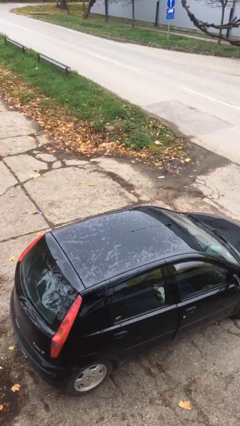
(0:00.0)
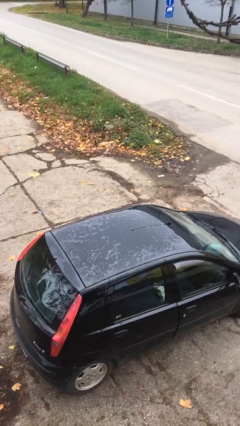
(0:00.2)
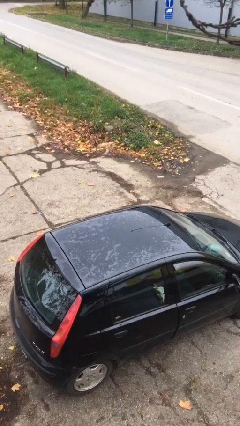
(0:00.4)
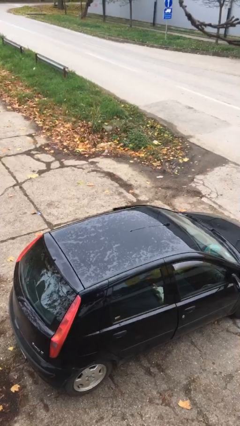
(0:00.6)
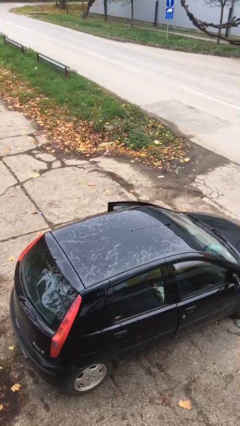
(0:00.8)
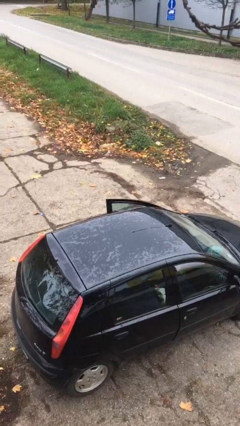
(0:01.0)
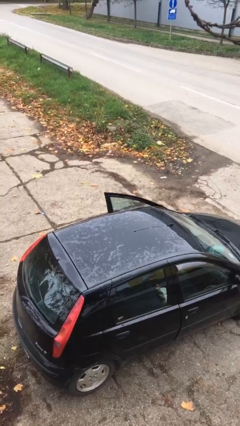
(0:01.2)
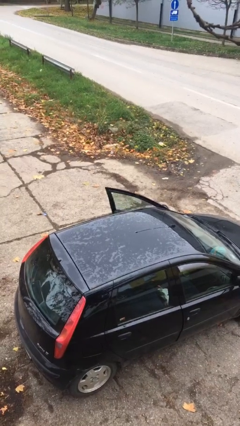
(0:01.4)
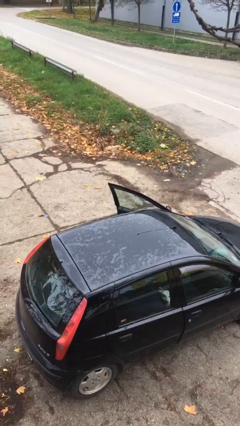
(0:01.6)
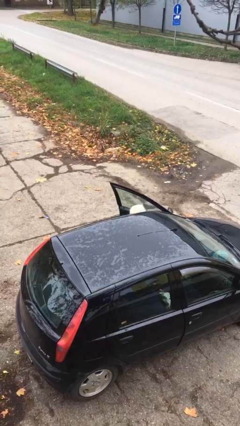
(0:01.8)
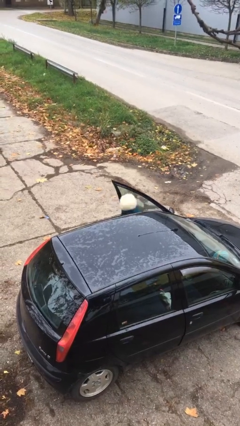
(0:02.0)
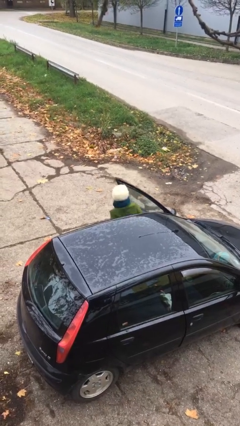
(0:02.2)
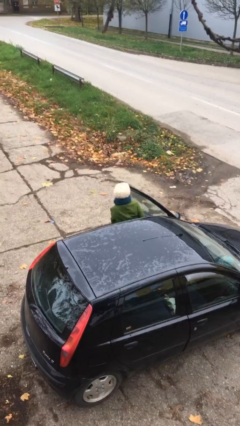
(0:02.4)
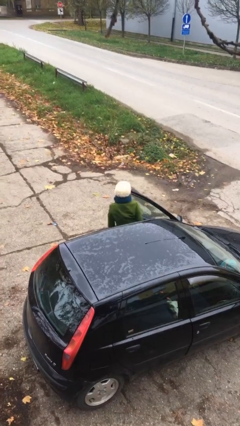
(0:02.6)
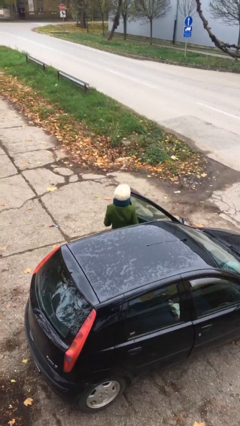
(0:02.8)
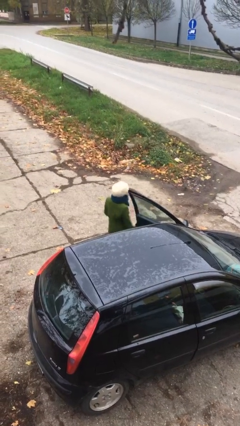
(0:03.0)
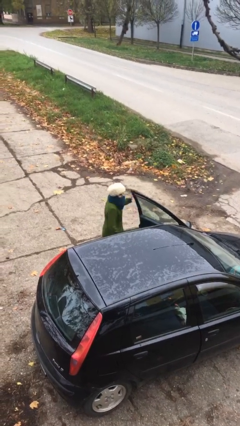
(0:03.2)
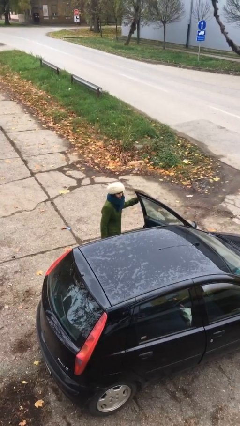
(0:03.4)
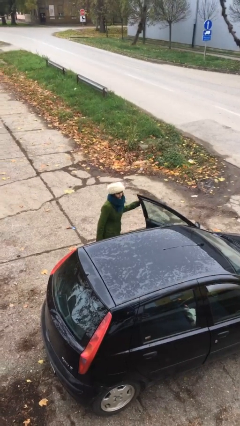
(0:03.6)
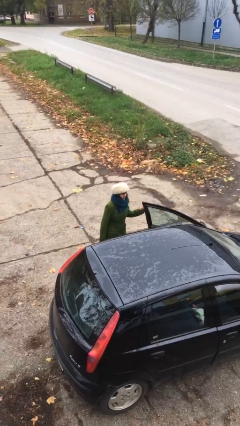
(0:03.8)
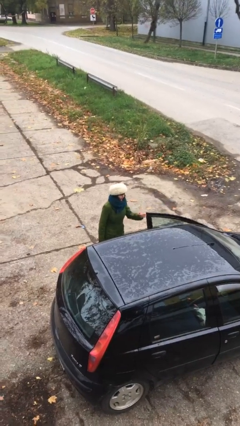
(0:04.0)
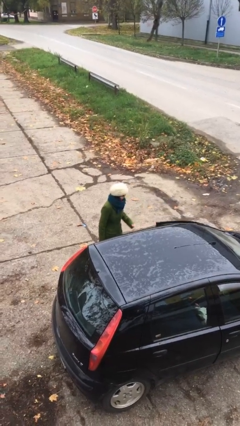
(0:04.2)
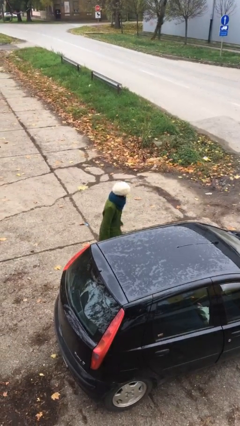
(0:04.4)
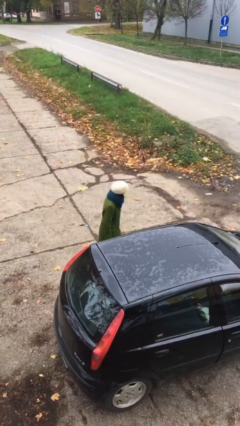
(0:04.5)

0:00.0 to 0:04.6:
person exits car

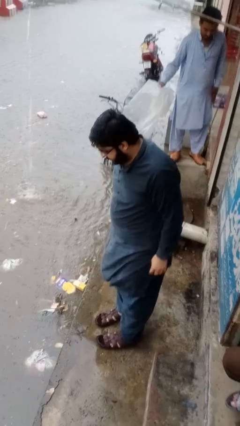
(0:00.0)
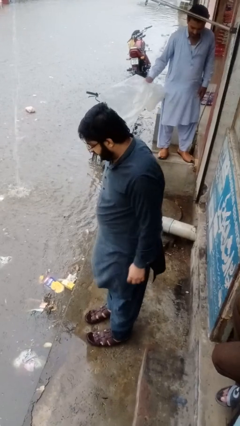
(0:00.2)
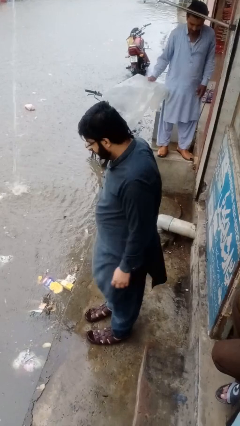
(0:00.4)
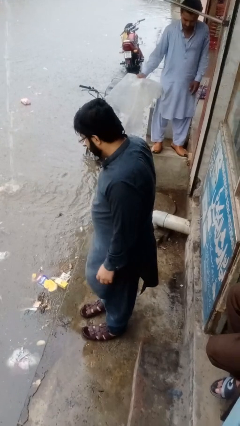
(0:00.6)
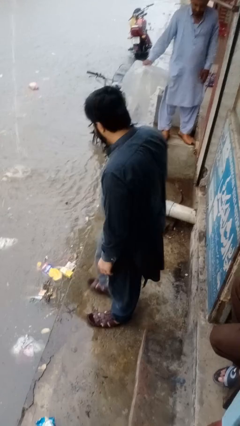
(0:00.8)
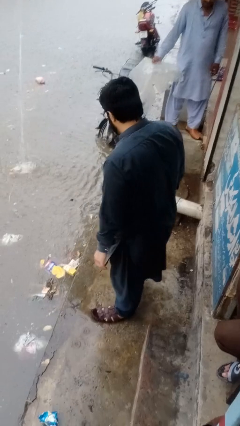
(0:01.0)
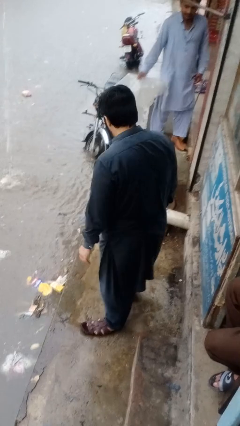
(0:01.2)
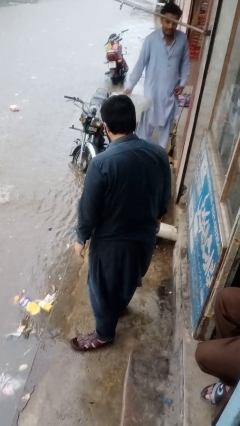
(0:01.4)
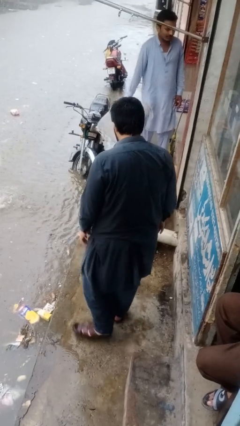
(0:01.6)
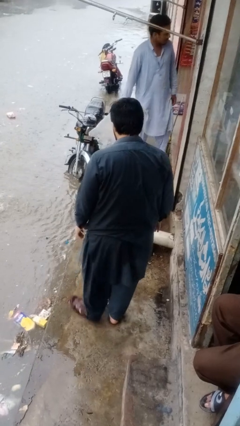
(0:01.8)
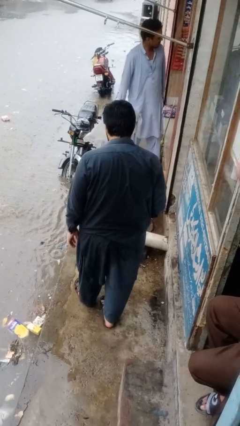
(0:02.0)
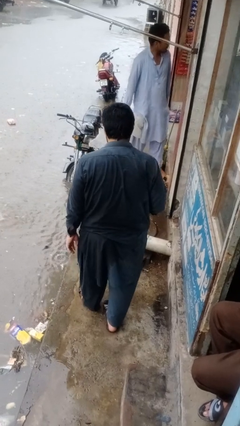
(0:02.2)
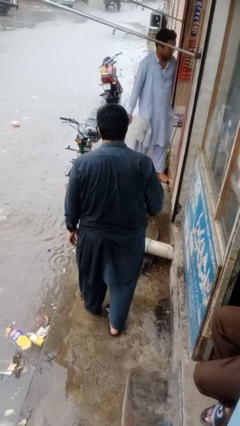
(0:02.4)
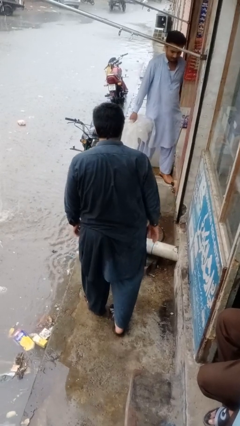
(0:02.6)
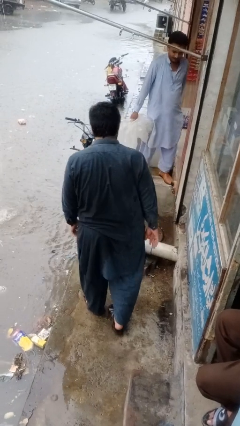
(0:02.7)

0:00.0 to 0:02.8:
person trips on object on floor

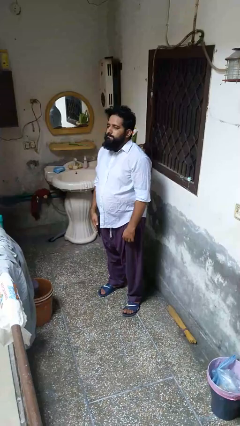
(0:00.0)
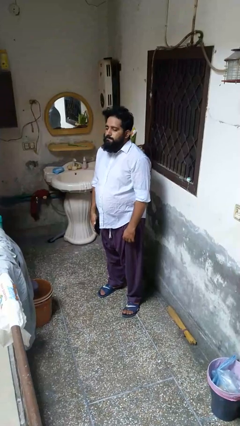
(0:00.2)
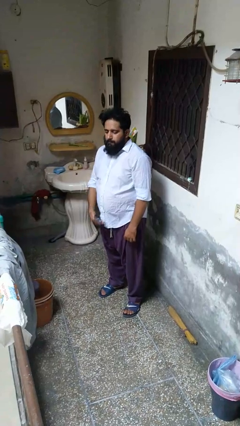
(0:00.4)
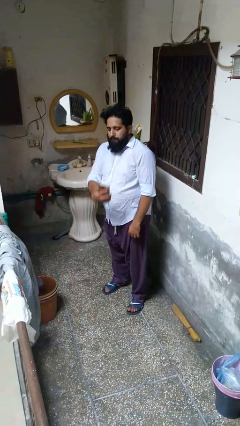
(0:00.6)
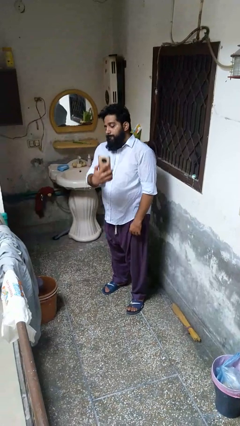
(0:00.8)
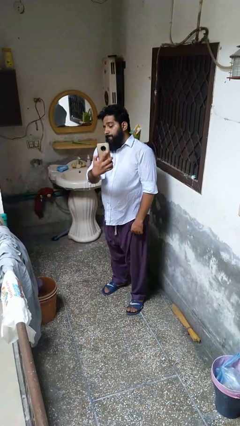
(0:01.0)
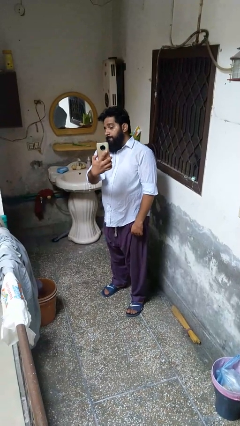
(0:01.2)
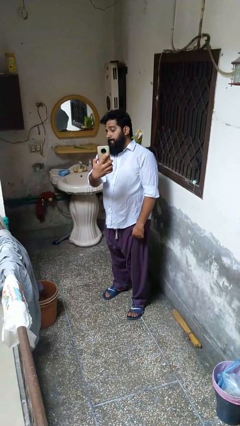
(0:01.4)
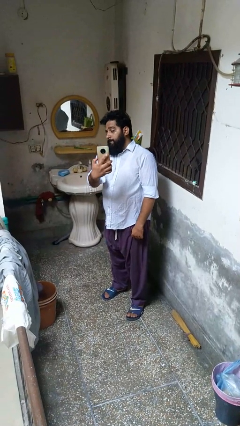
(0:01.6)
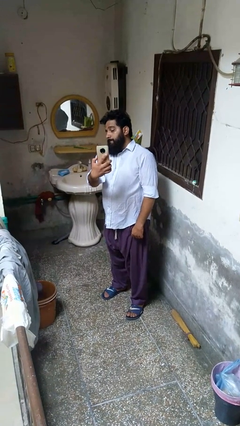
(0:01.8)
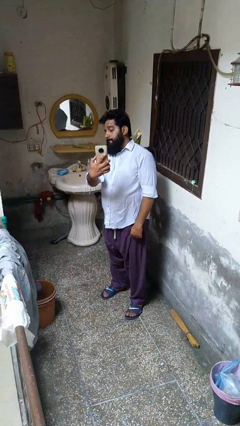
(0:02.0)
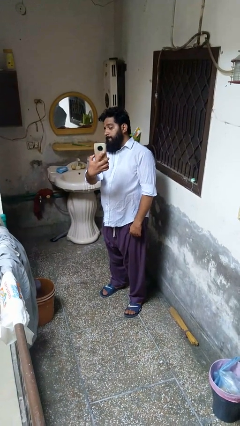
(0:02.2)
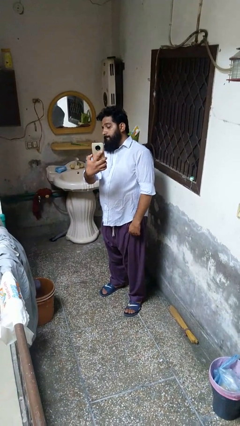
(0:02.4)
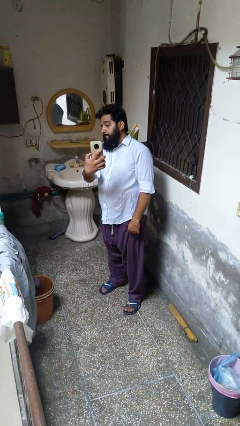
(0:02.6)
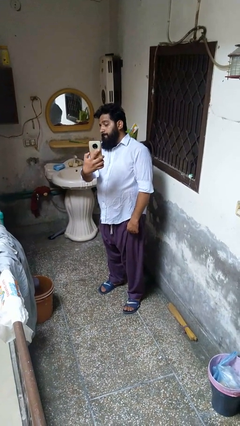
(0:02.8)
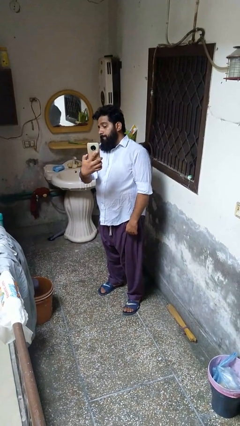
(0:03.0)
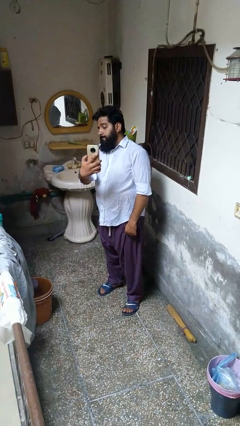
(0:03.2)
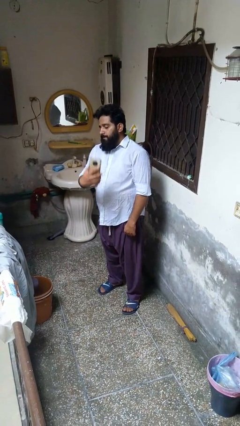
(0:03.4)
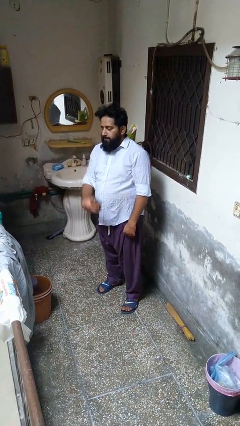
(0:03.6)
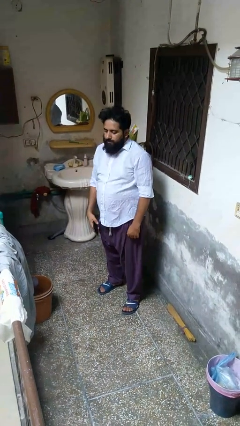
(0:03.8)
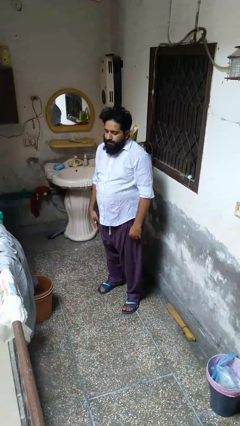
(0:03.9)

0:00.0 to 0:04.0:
person takes selfie

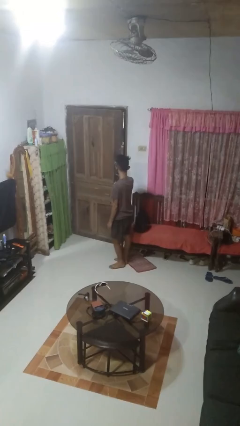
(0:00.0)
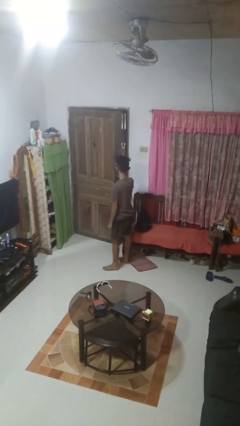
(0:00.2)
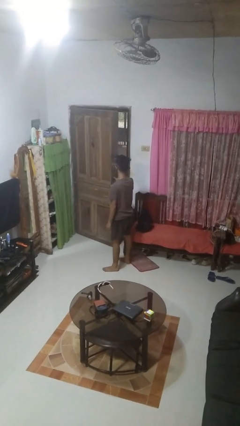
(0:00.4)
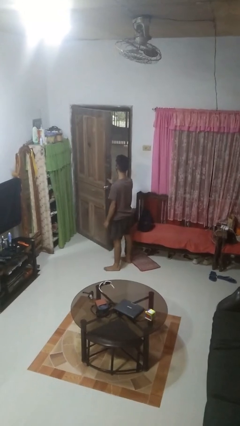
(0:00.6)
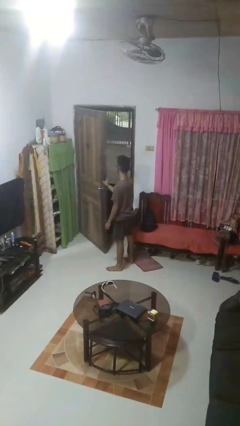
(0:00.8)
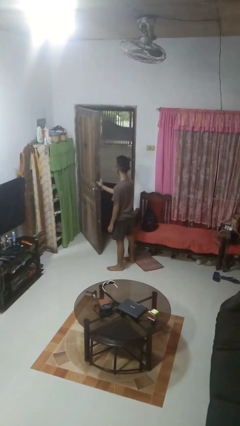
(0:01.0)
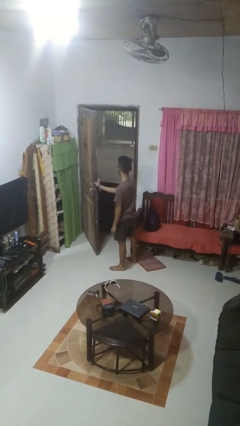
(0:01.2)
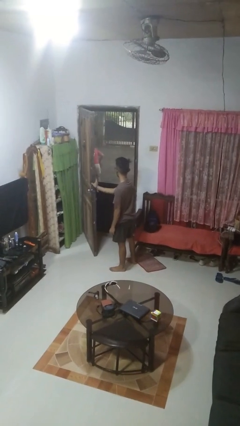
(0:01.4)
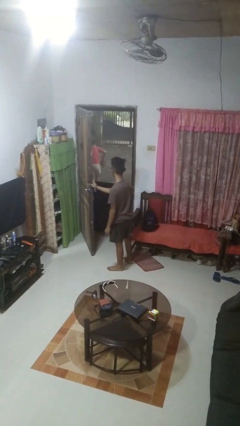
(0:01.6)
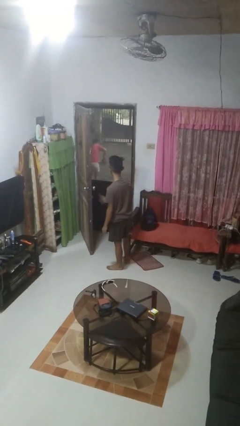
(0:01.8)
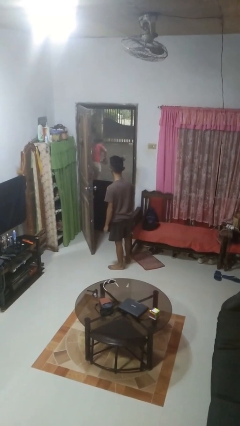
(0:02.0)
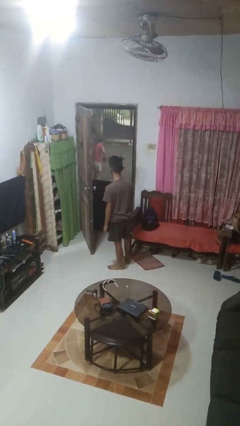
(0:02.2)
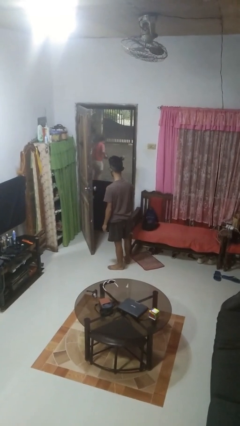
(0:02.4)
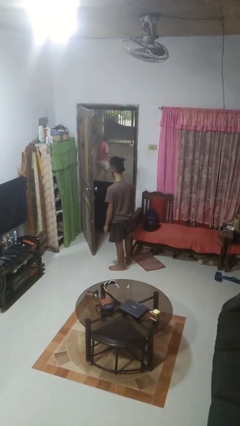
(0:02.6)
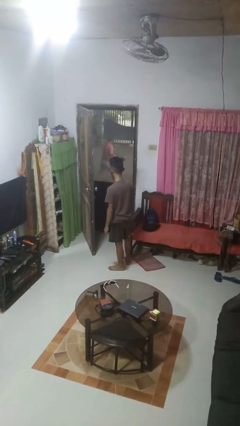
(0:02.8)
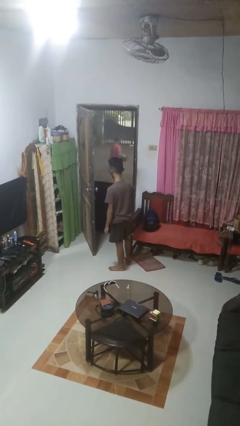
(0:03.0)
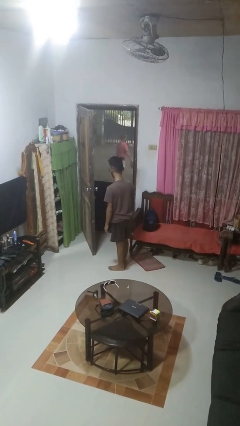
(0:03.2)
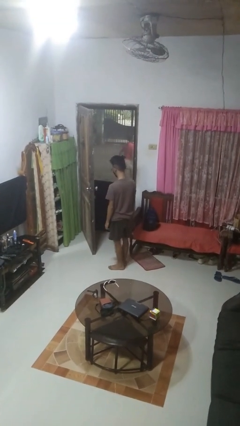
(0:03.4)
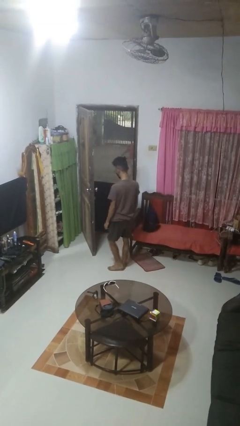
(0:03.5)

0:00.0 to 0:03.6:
person opens facility door

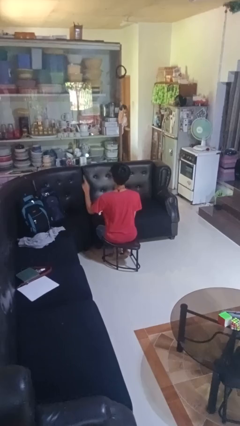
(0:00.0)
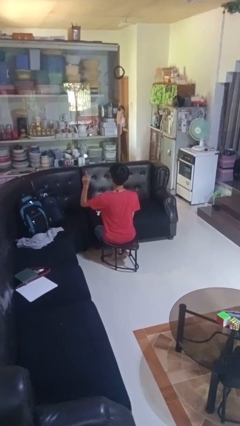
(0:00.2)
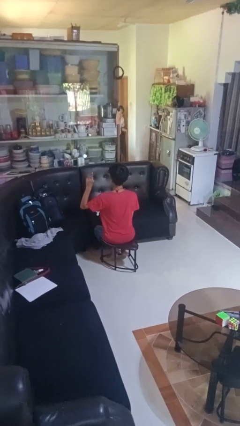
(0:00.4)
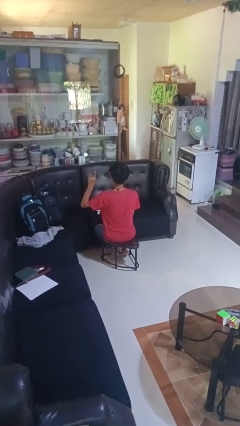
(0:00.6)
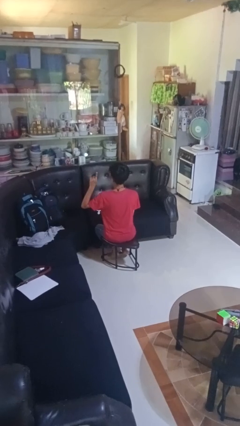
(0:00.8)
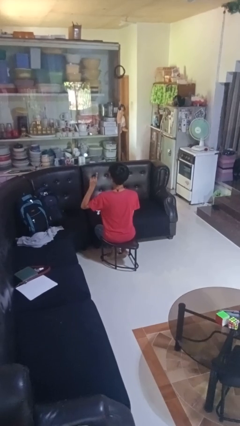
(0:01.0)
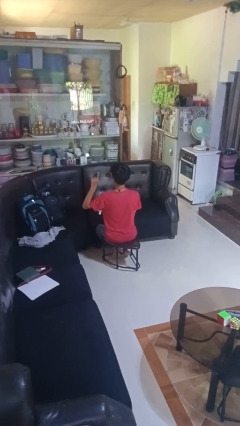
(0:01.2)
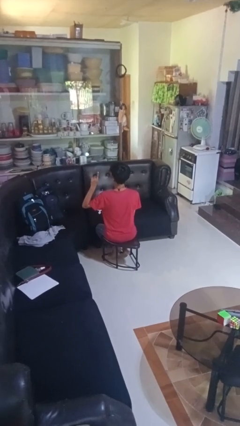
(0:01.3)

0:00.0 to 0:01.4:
person gestures number one

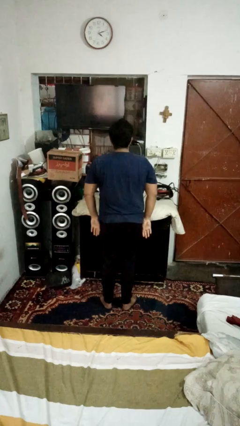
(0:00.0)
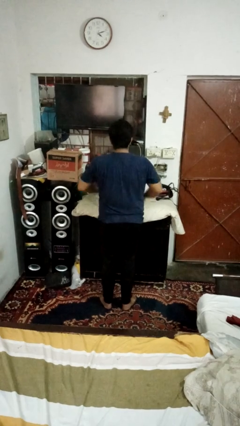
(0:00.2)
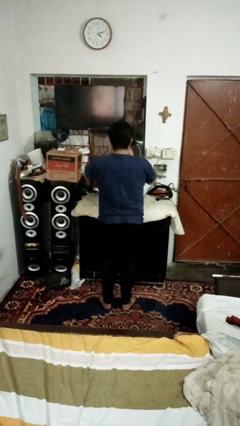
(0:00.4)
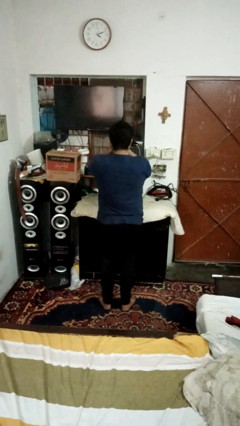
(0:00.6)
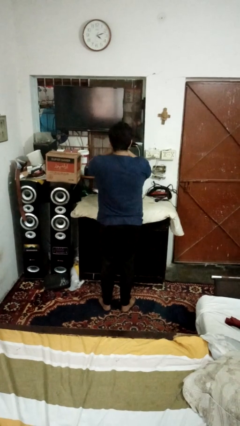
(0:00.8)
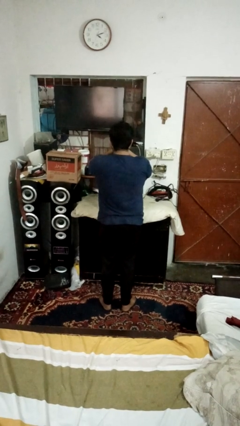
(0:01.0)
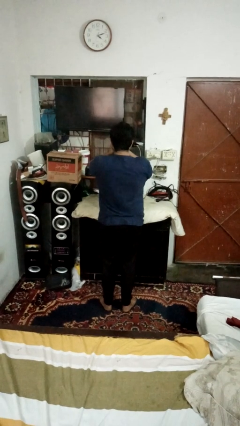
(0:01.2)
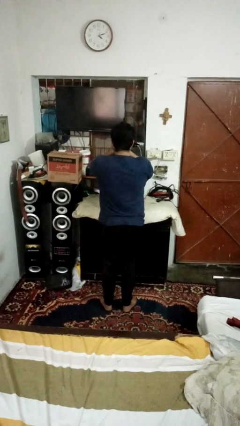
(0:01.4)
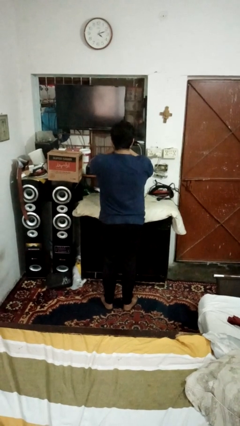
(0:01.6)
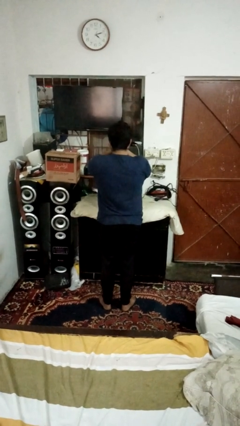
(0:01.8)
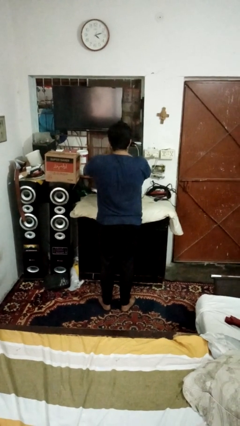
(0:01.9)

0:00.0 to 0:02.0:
person covers face with hands
